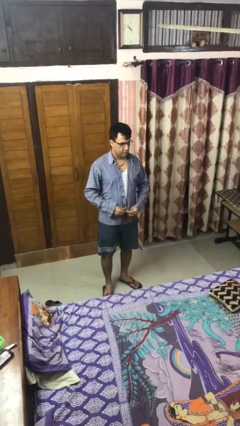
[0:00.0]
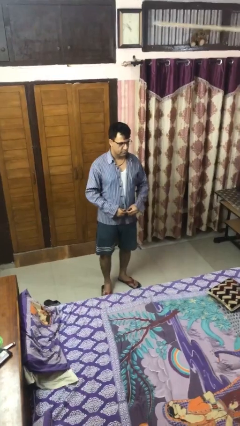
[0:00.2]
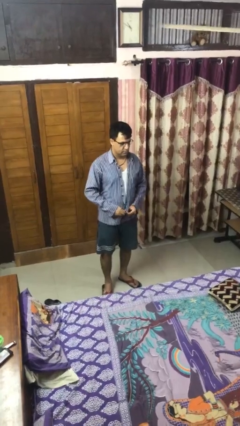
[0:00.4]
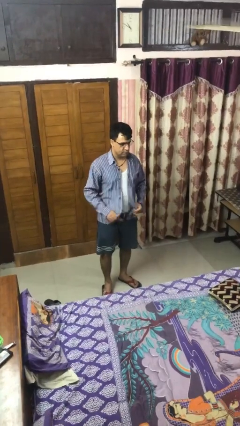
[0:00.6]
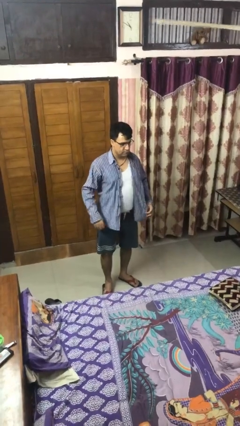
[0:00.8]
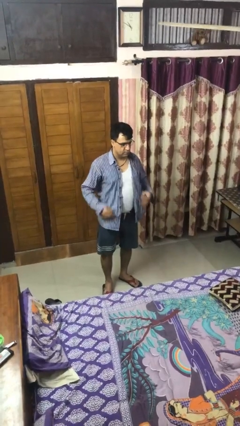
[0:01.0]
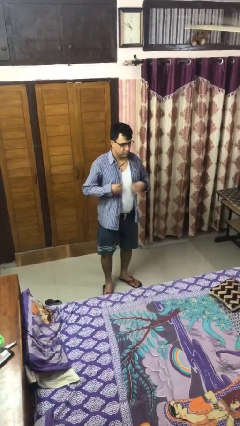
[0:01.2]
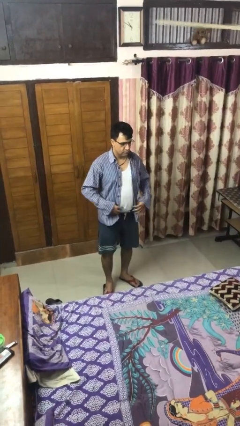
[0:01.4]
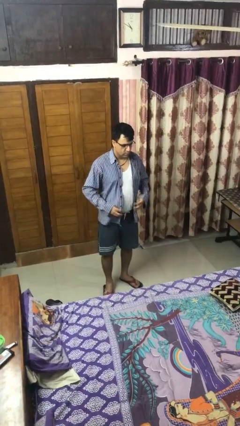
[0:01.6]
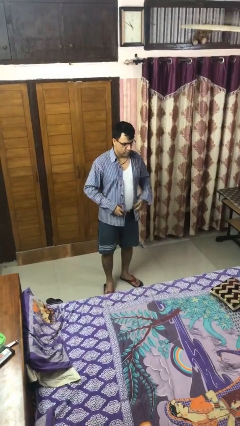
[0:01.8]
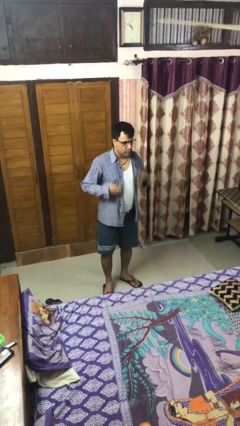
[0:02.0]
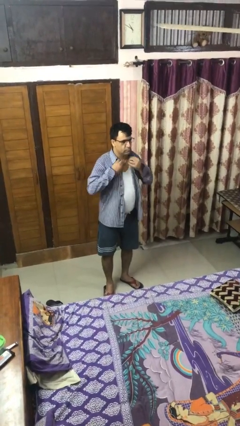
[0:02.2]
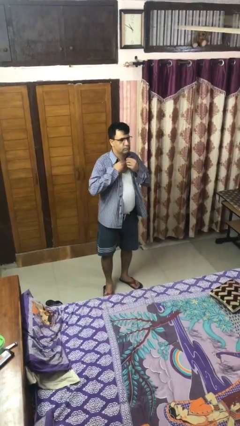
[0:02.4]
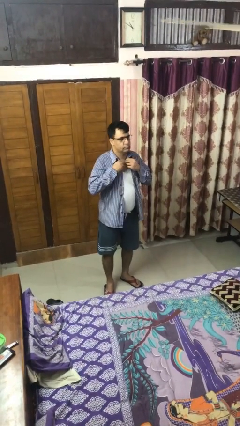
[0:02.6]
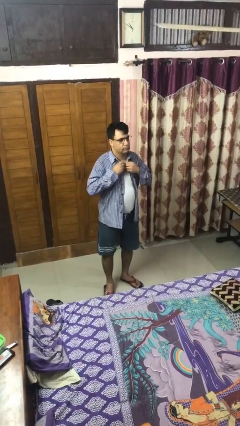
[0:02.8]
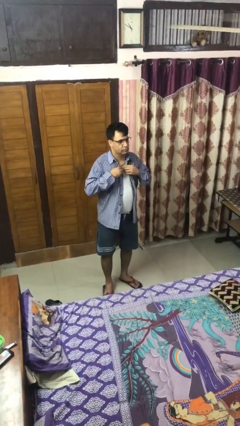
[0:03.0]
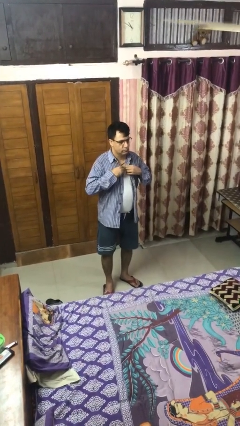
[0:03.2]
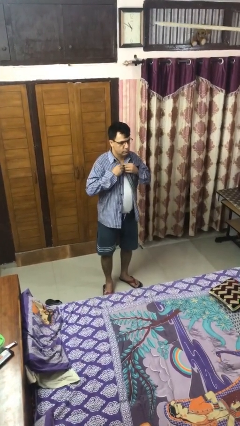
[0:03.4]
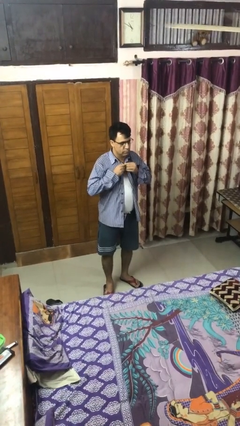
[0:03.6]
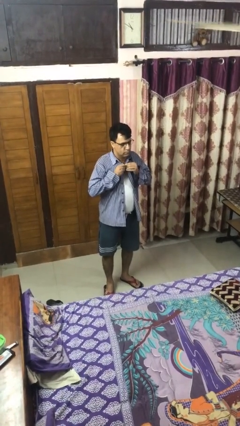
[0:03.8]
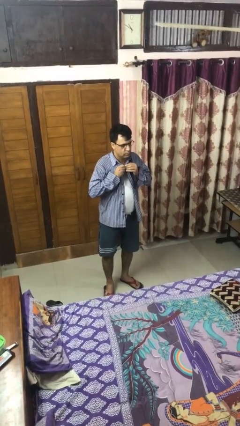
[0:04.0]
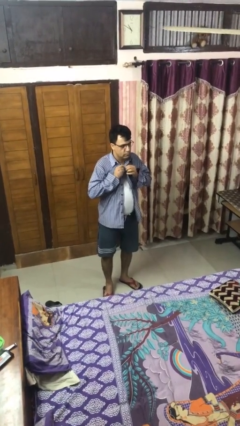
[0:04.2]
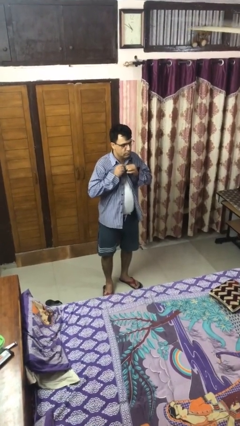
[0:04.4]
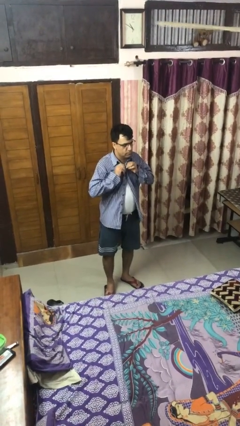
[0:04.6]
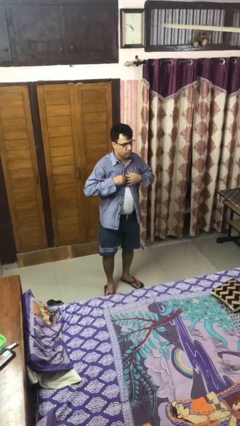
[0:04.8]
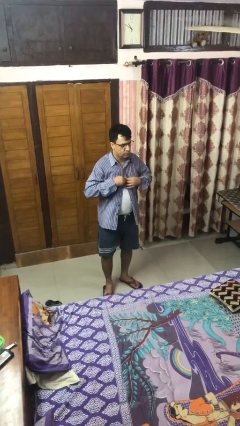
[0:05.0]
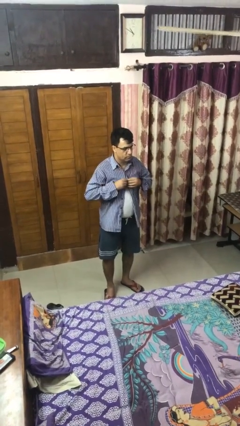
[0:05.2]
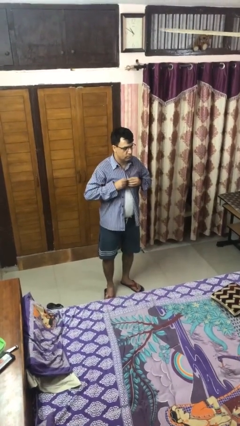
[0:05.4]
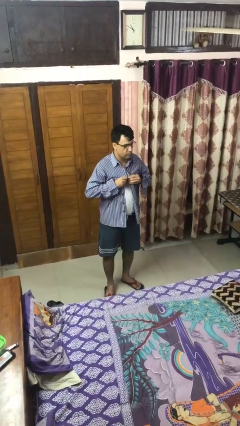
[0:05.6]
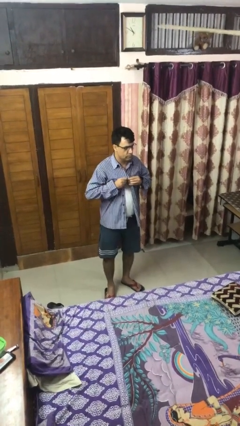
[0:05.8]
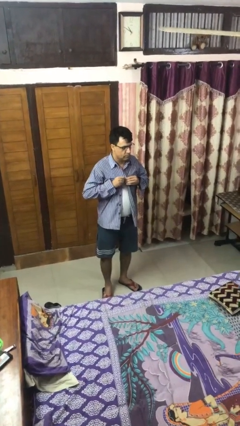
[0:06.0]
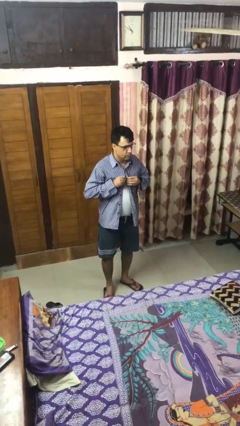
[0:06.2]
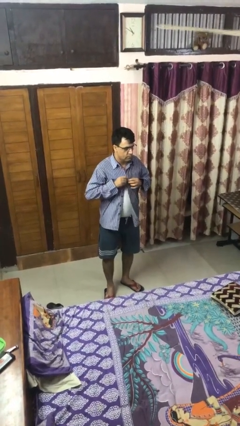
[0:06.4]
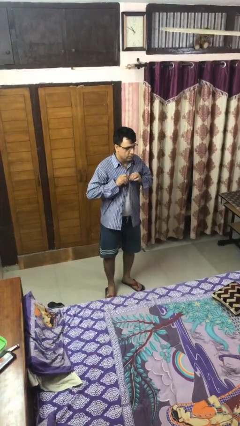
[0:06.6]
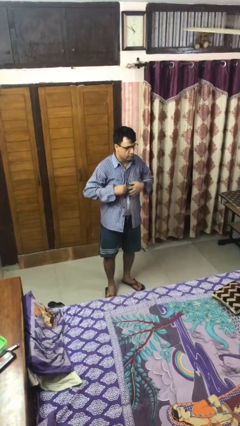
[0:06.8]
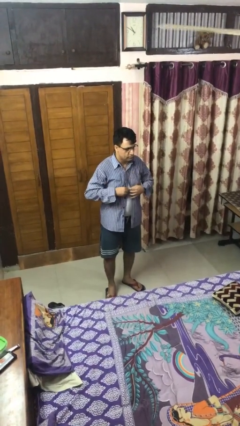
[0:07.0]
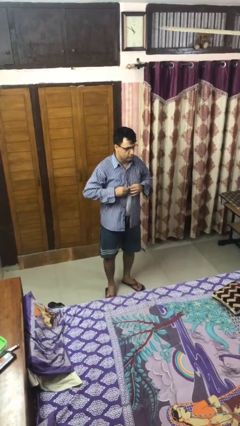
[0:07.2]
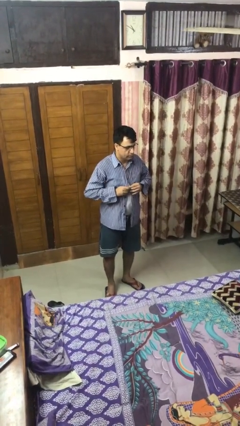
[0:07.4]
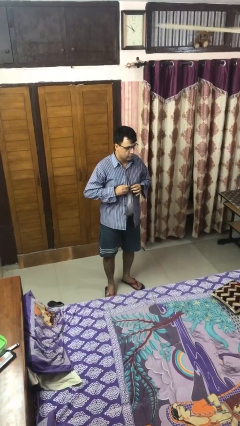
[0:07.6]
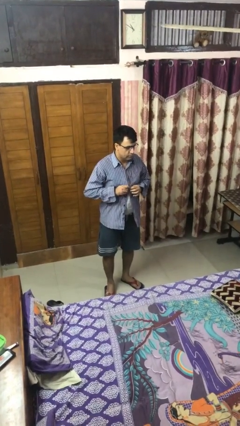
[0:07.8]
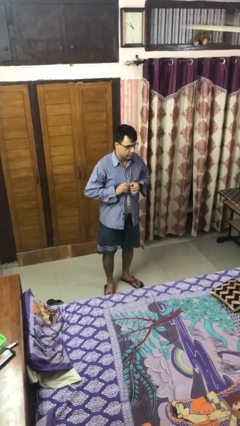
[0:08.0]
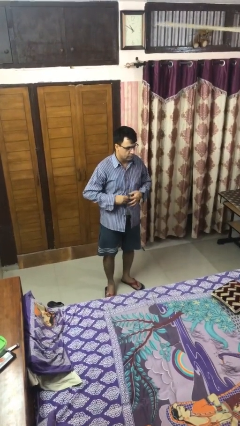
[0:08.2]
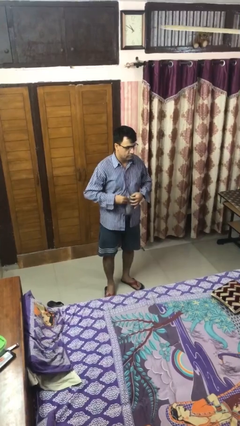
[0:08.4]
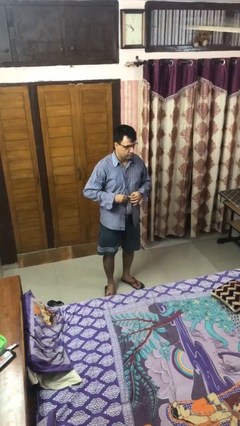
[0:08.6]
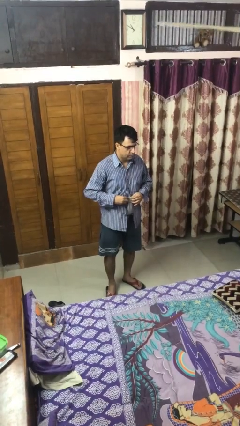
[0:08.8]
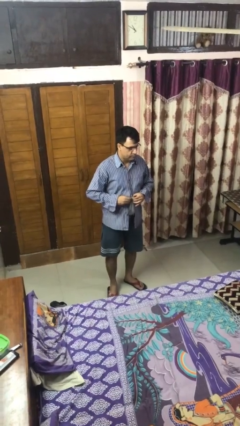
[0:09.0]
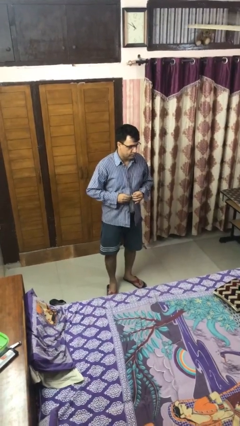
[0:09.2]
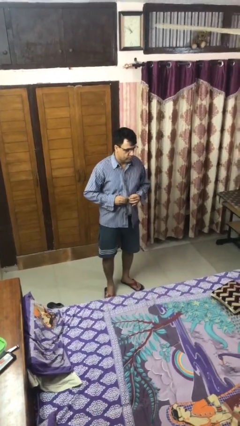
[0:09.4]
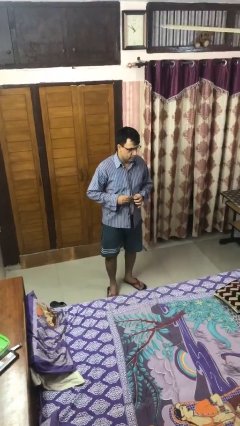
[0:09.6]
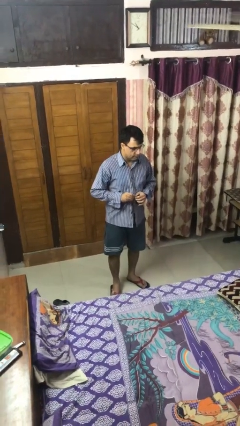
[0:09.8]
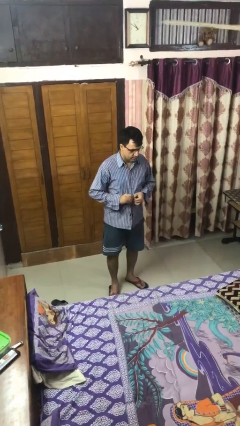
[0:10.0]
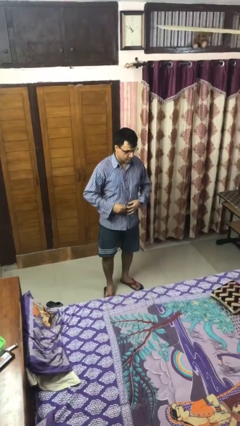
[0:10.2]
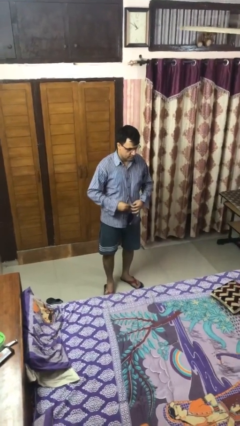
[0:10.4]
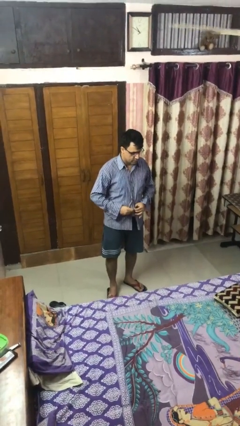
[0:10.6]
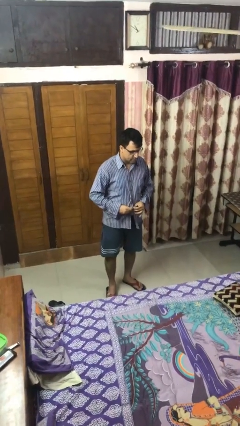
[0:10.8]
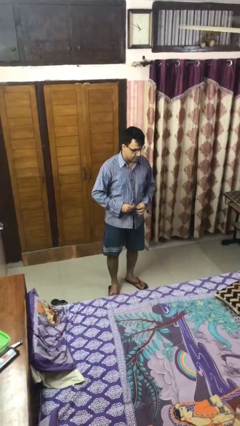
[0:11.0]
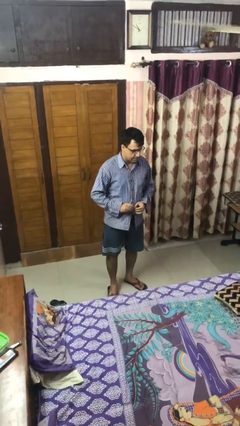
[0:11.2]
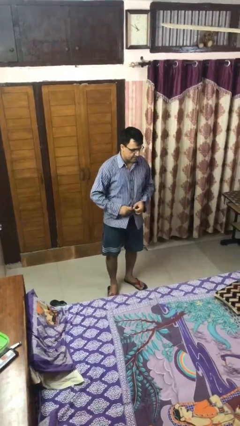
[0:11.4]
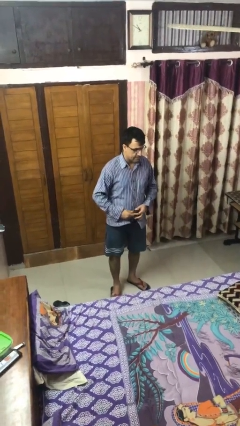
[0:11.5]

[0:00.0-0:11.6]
person buttons shirt

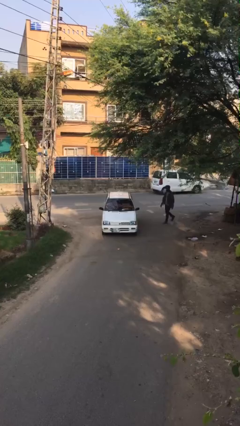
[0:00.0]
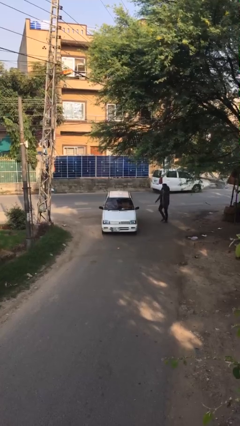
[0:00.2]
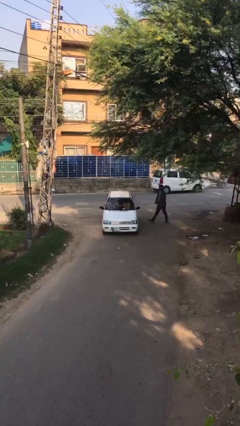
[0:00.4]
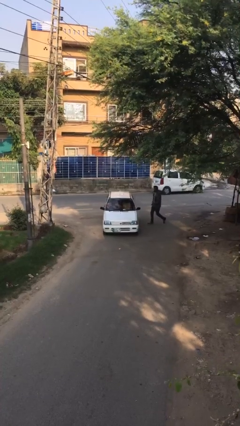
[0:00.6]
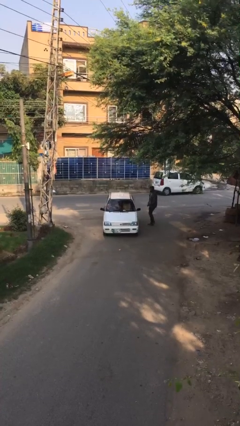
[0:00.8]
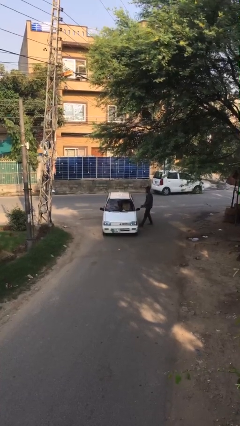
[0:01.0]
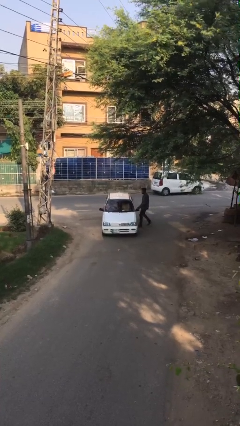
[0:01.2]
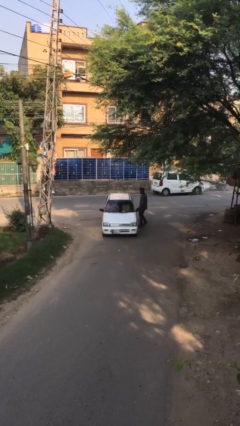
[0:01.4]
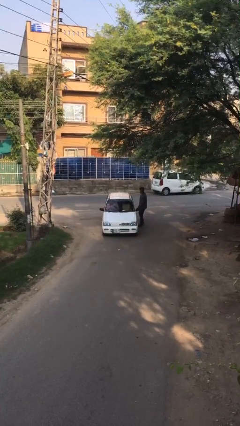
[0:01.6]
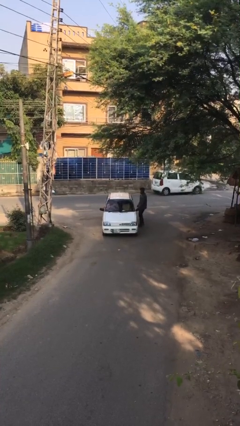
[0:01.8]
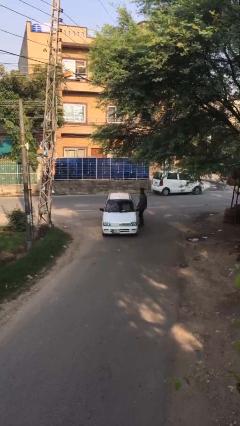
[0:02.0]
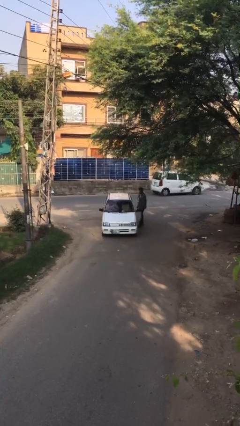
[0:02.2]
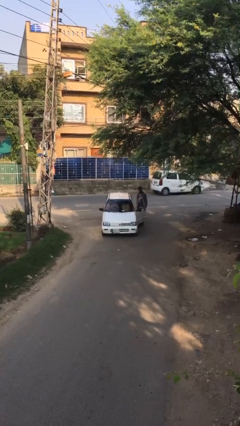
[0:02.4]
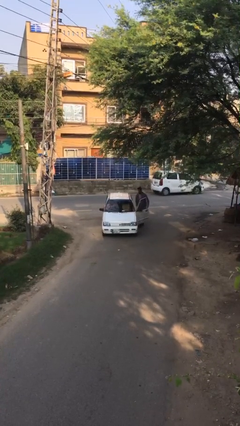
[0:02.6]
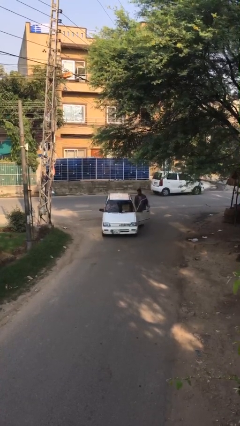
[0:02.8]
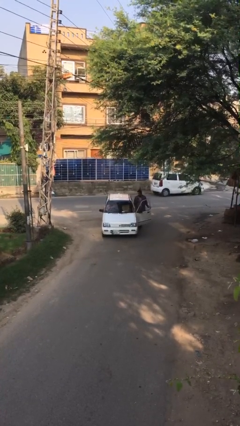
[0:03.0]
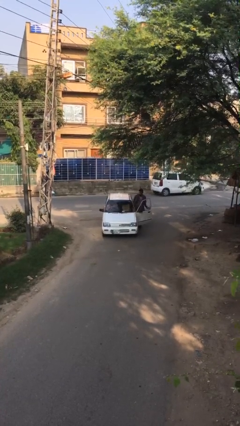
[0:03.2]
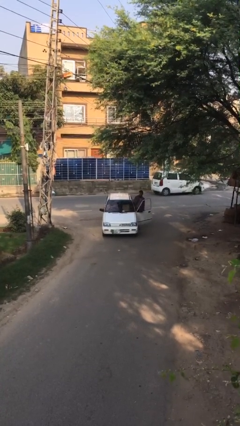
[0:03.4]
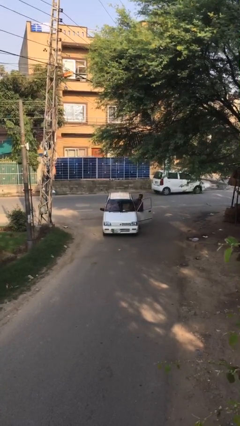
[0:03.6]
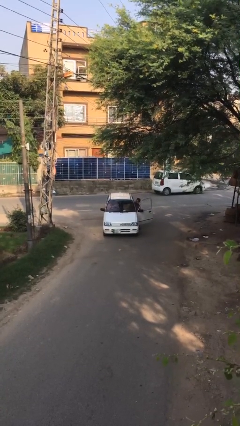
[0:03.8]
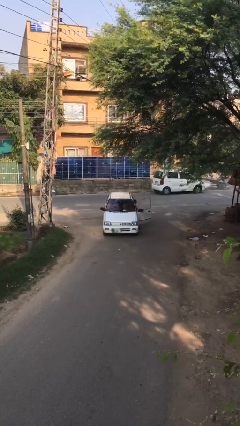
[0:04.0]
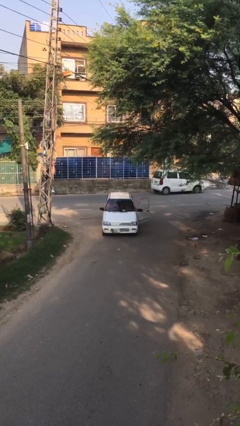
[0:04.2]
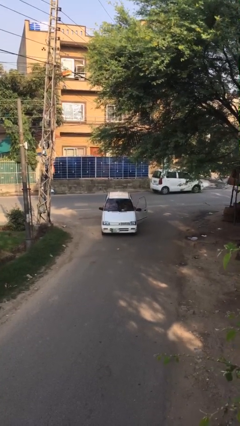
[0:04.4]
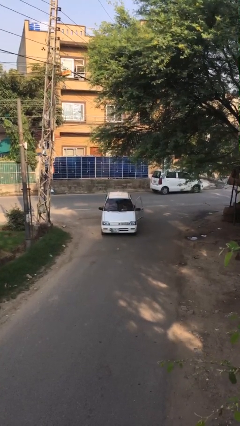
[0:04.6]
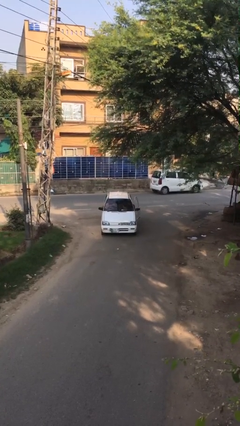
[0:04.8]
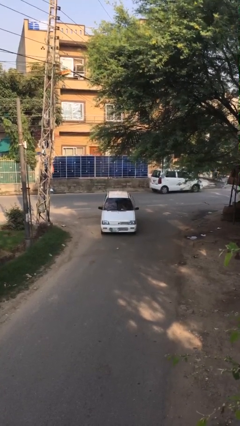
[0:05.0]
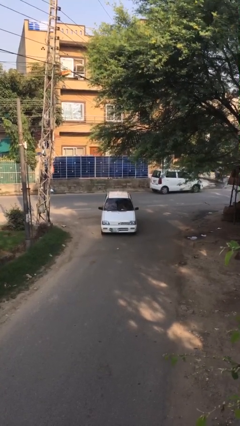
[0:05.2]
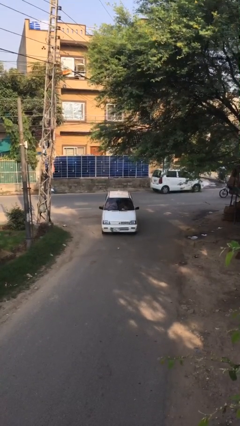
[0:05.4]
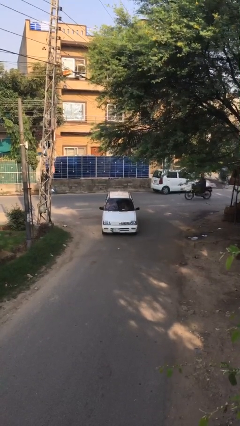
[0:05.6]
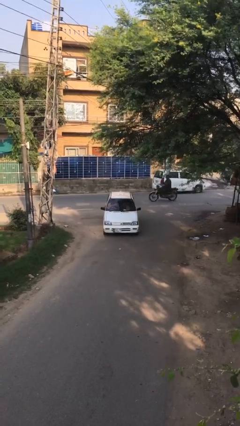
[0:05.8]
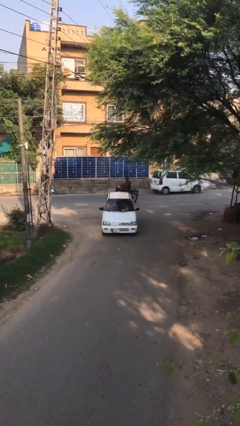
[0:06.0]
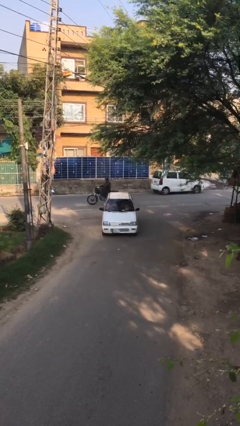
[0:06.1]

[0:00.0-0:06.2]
car picks up person

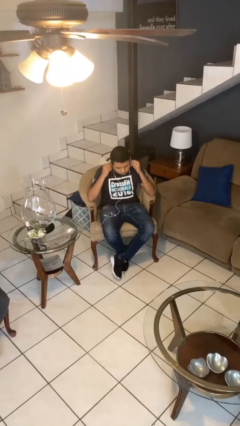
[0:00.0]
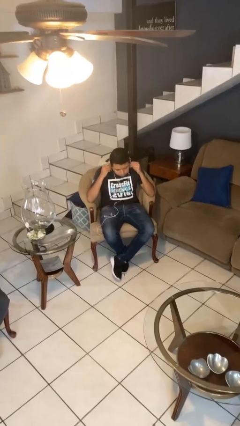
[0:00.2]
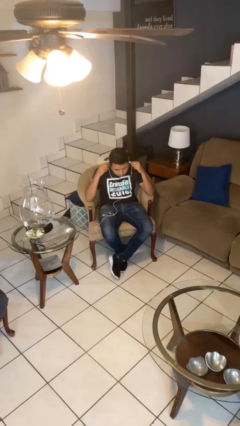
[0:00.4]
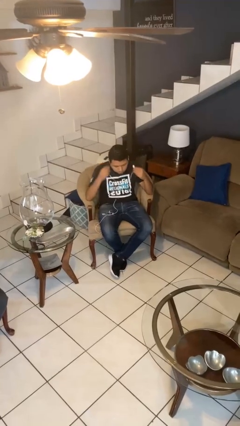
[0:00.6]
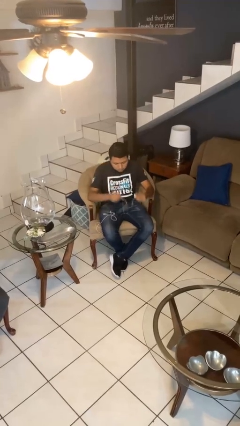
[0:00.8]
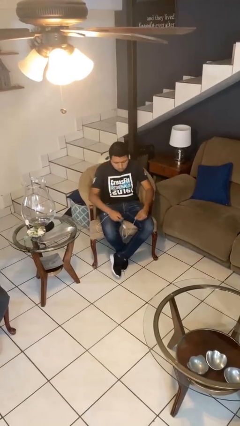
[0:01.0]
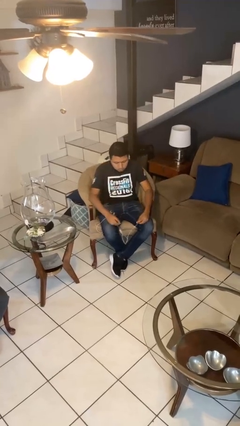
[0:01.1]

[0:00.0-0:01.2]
person takes off headphones
